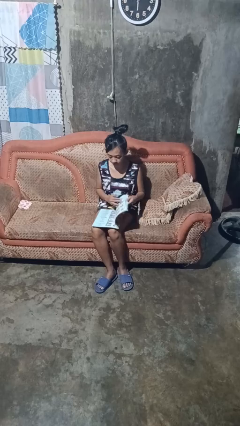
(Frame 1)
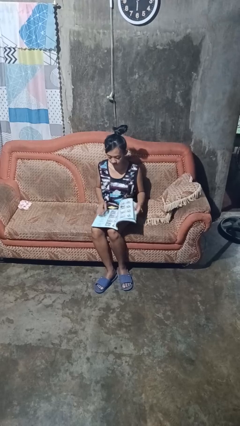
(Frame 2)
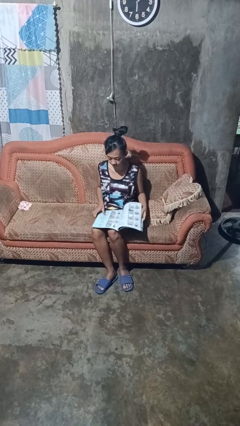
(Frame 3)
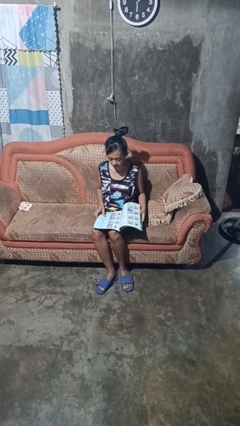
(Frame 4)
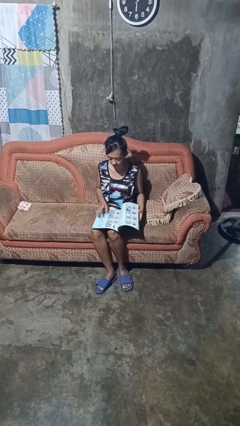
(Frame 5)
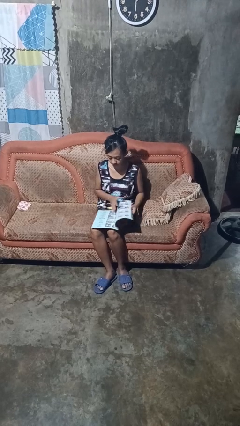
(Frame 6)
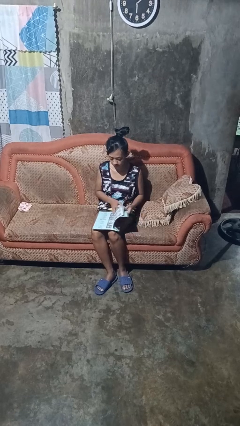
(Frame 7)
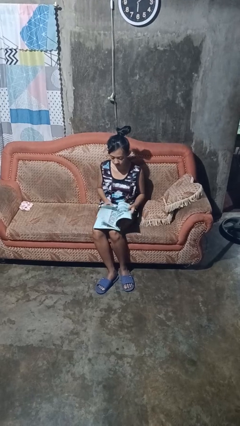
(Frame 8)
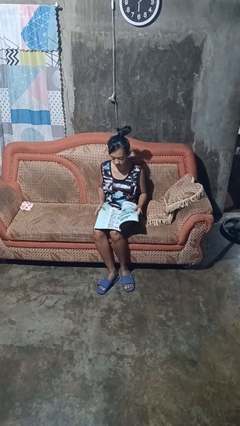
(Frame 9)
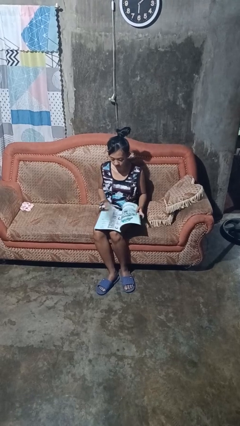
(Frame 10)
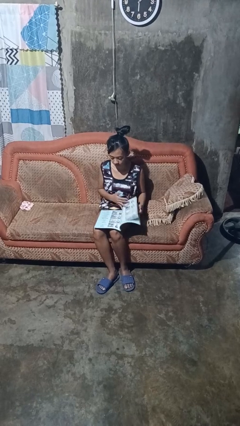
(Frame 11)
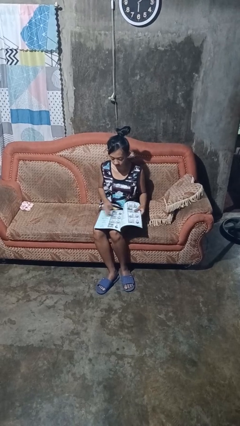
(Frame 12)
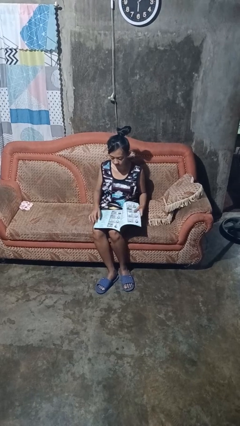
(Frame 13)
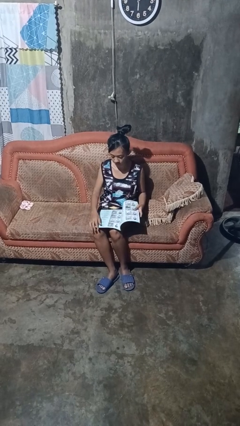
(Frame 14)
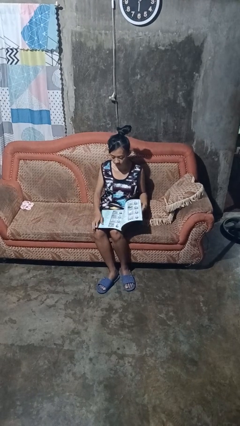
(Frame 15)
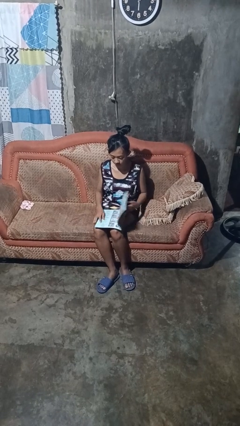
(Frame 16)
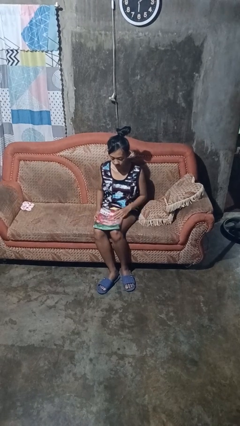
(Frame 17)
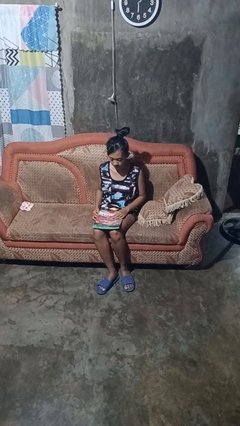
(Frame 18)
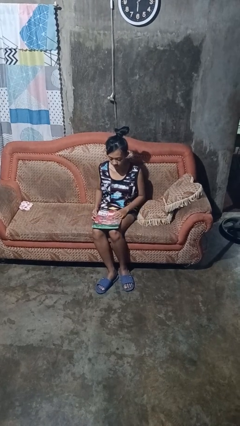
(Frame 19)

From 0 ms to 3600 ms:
person reads magazine

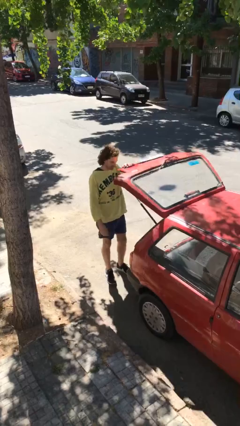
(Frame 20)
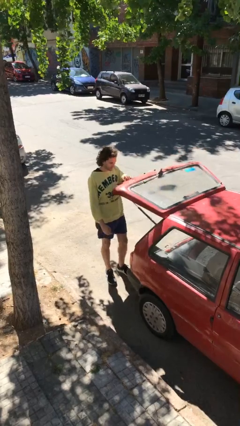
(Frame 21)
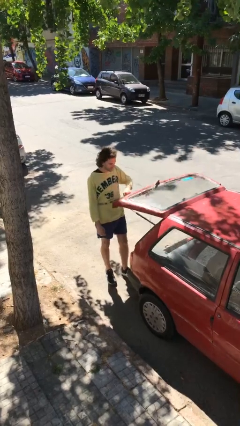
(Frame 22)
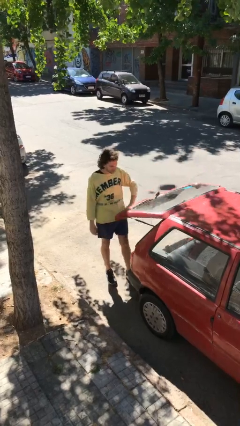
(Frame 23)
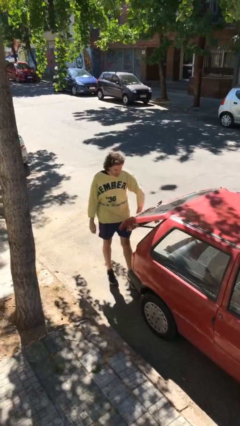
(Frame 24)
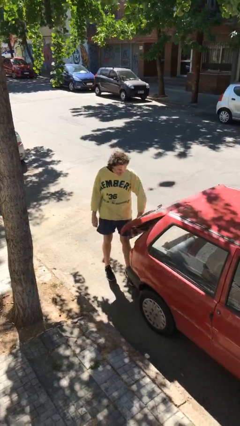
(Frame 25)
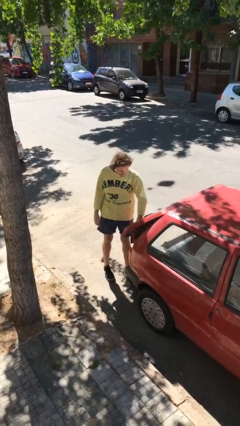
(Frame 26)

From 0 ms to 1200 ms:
person closes car trunk

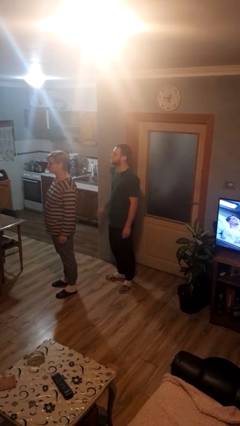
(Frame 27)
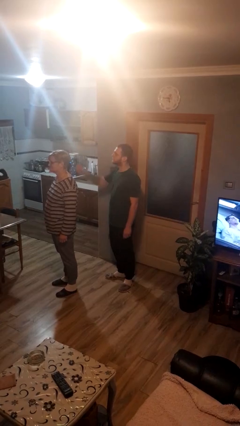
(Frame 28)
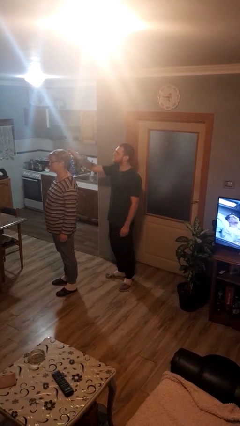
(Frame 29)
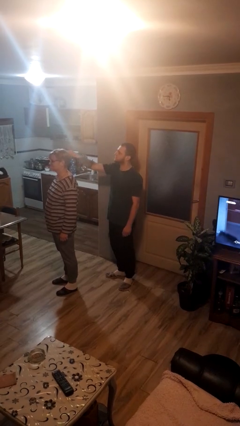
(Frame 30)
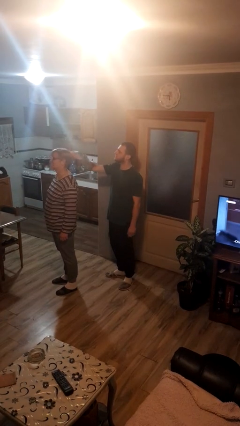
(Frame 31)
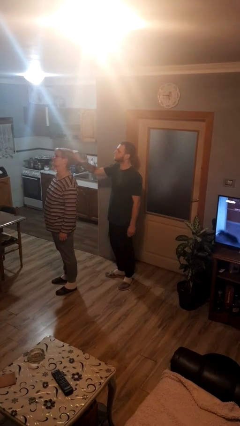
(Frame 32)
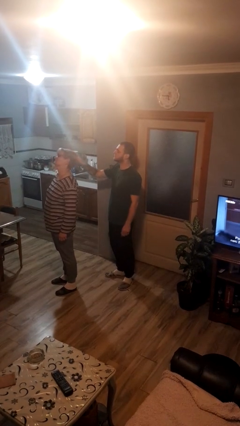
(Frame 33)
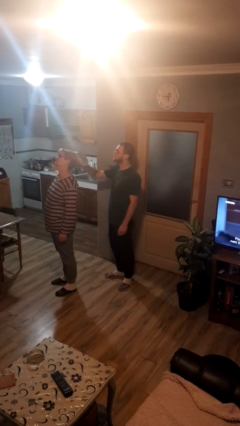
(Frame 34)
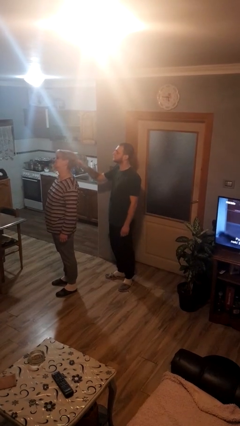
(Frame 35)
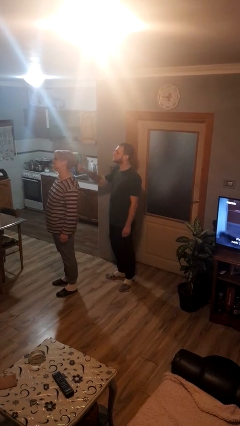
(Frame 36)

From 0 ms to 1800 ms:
person grabs person by hair

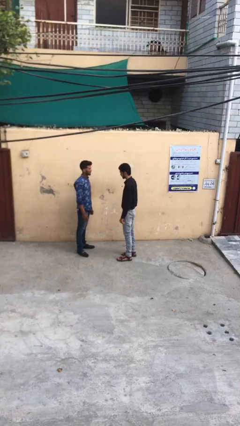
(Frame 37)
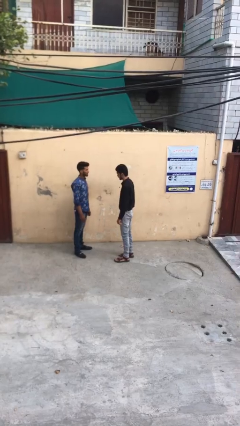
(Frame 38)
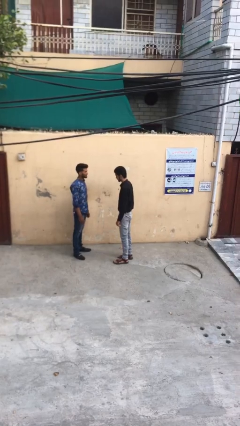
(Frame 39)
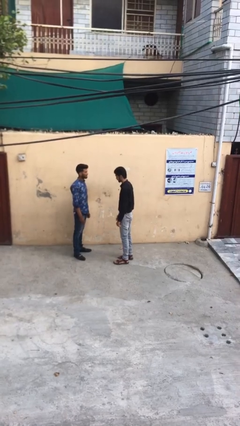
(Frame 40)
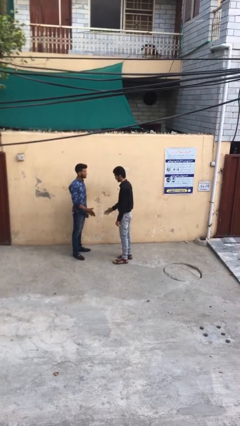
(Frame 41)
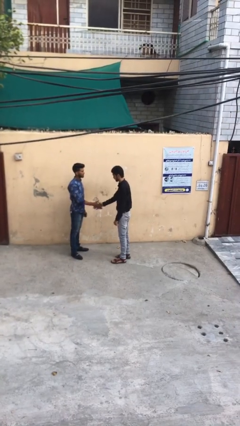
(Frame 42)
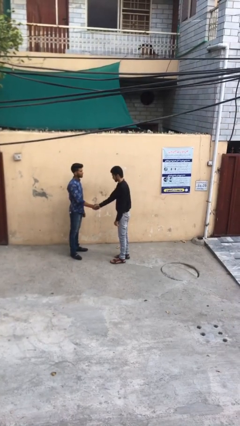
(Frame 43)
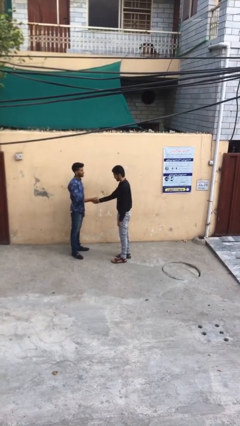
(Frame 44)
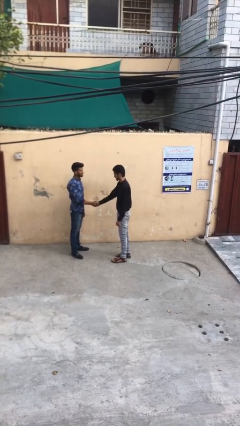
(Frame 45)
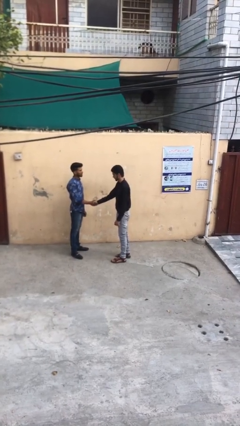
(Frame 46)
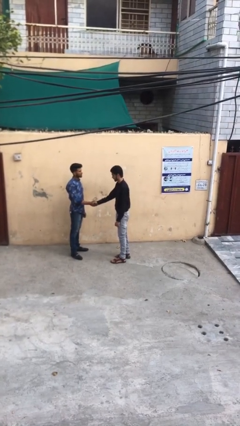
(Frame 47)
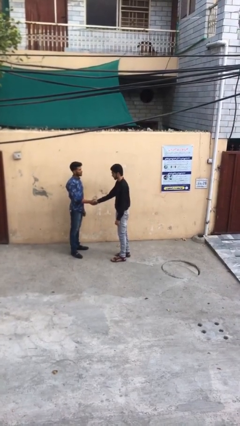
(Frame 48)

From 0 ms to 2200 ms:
person shakes hand

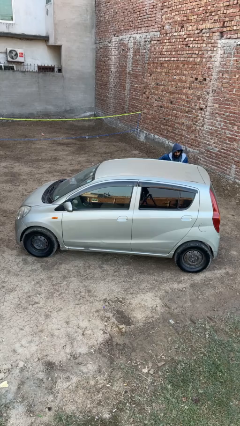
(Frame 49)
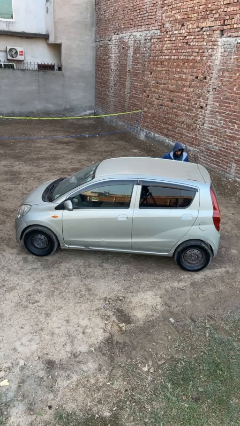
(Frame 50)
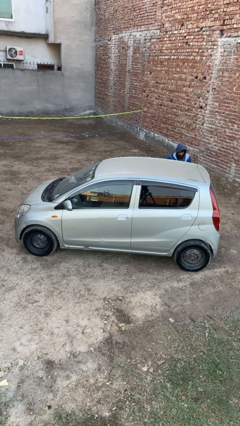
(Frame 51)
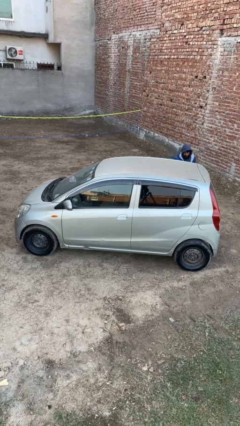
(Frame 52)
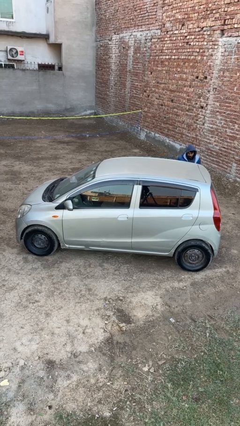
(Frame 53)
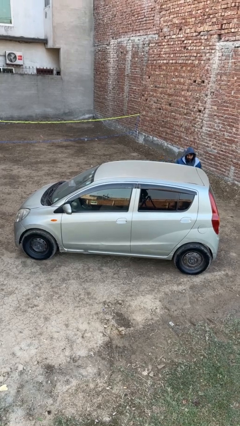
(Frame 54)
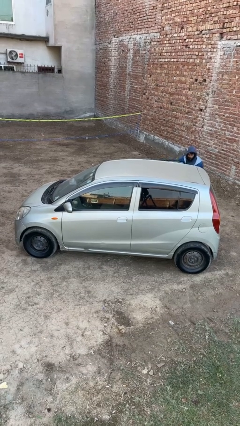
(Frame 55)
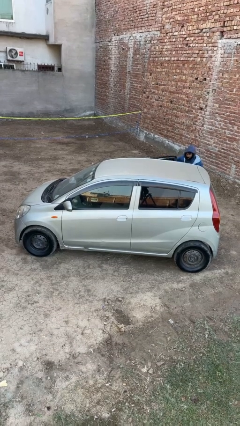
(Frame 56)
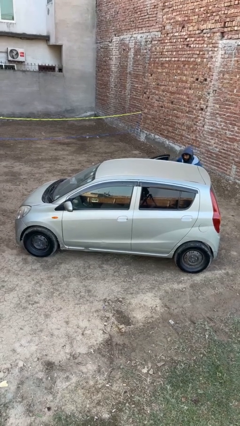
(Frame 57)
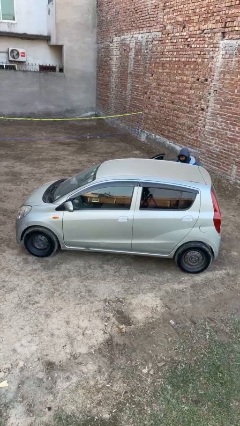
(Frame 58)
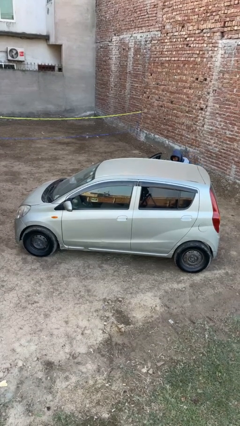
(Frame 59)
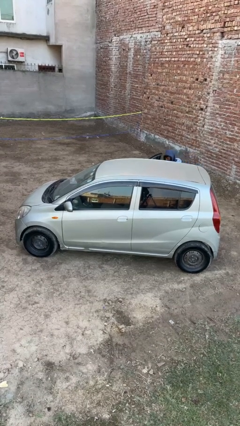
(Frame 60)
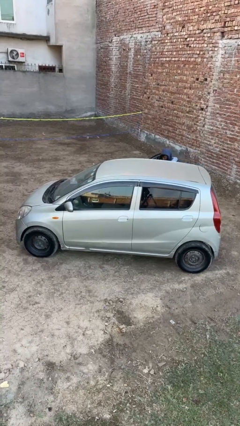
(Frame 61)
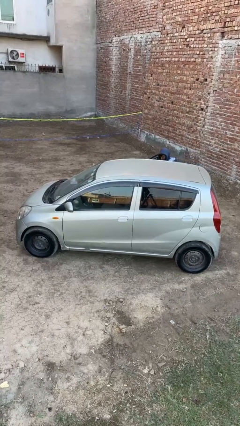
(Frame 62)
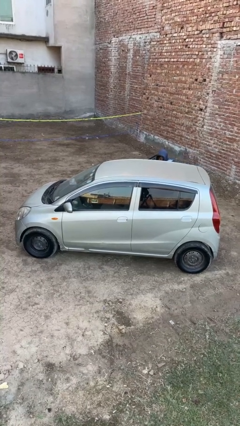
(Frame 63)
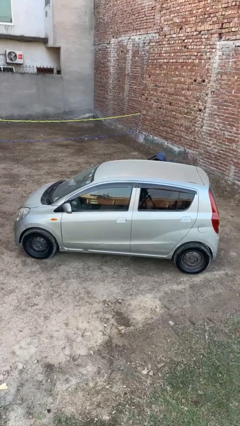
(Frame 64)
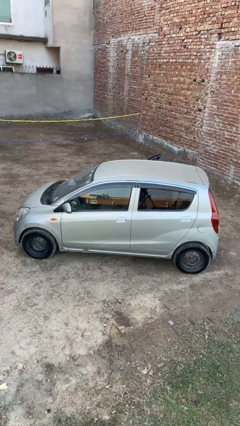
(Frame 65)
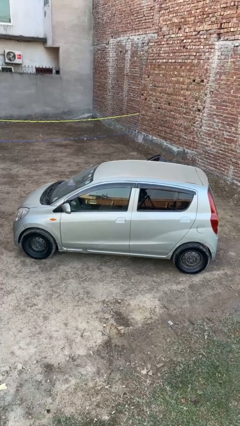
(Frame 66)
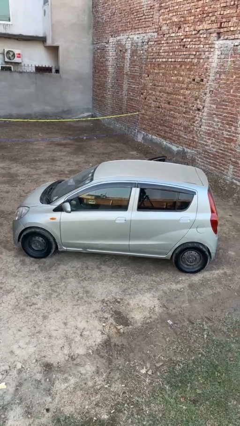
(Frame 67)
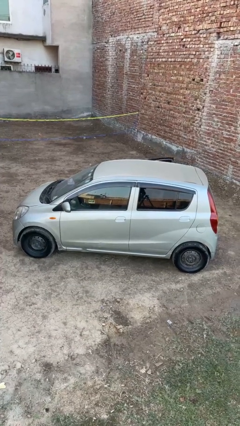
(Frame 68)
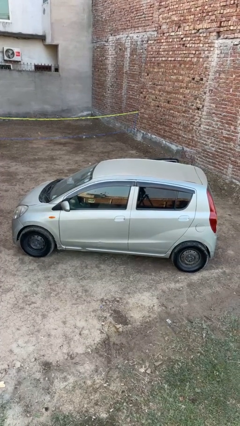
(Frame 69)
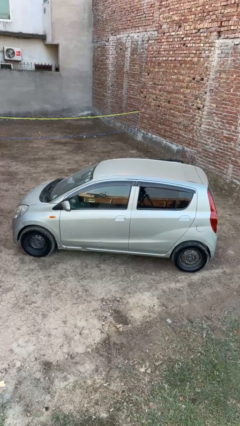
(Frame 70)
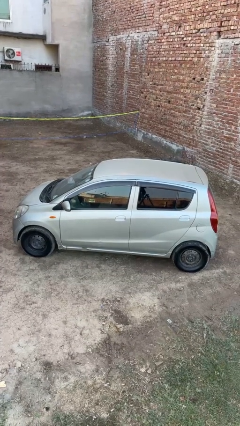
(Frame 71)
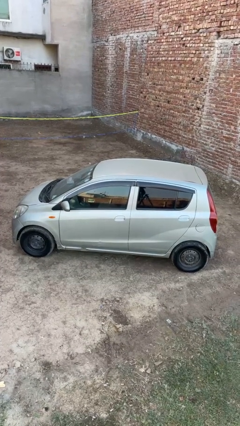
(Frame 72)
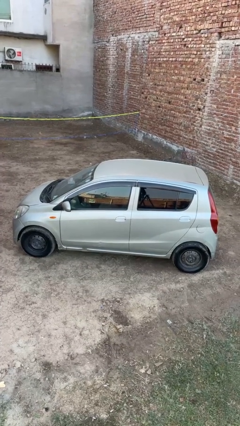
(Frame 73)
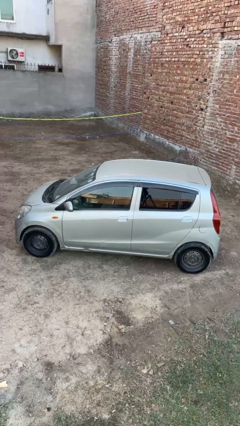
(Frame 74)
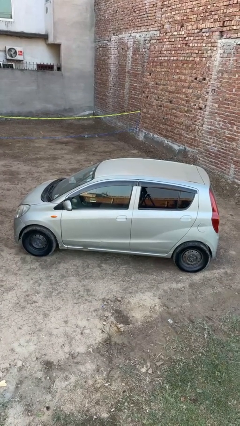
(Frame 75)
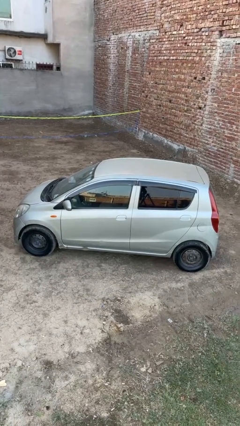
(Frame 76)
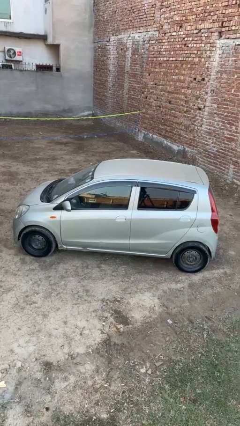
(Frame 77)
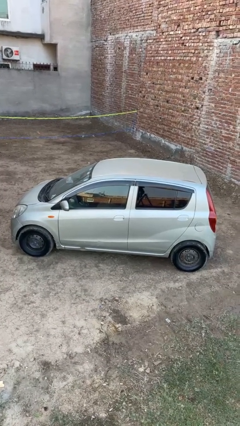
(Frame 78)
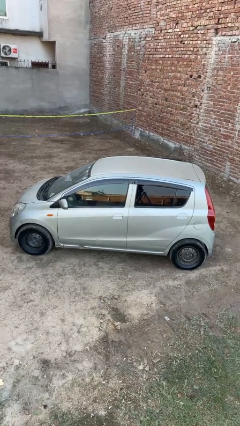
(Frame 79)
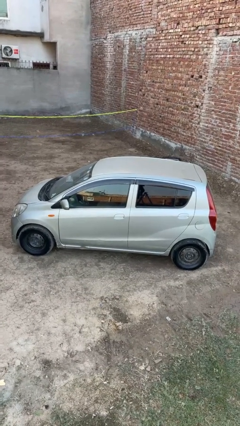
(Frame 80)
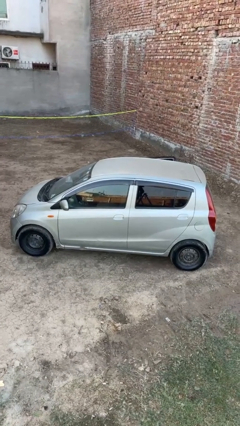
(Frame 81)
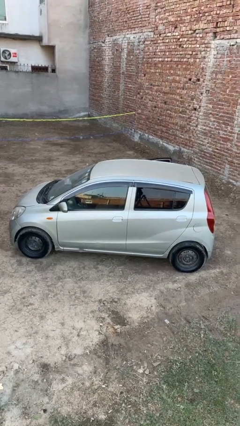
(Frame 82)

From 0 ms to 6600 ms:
car picks up person

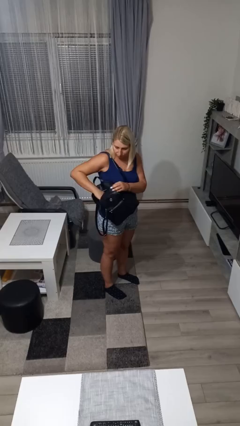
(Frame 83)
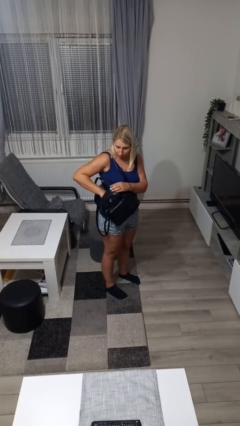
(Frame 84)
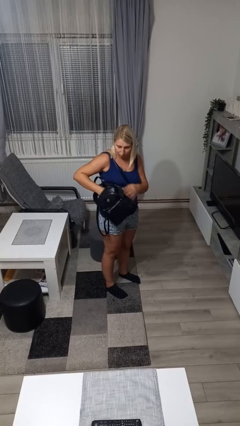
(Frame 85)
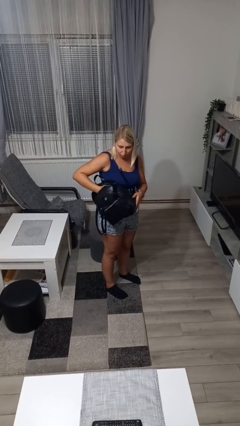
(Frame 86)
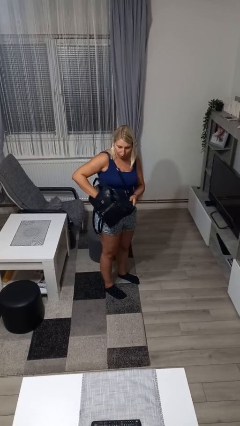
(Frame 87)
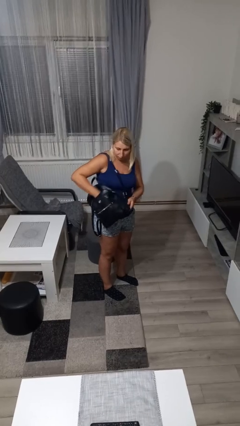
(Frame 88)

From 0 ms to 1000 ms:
person puts object into backpack

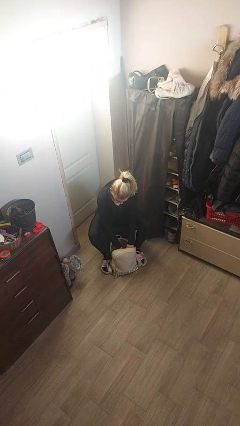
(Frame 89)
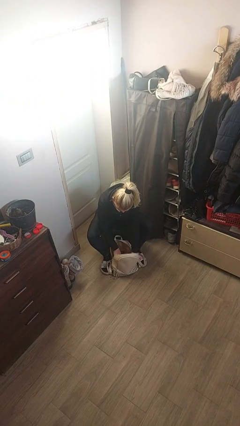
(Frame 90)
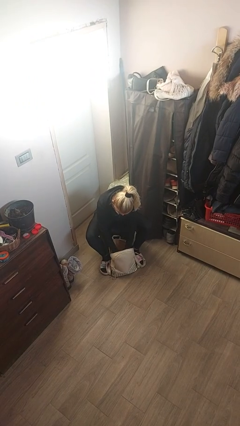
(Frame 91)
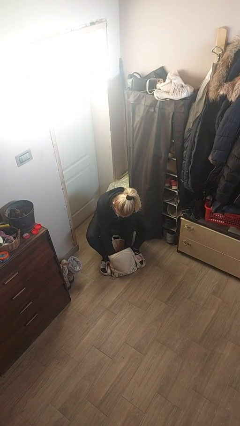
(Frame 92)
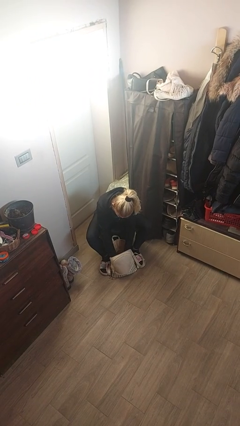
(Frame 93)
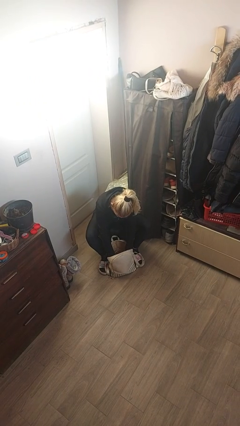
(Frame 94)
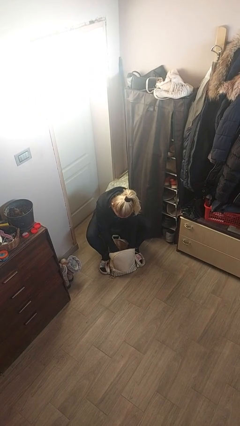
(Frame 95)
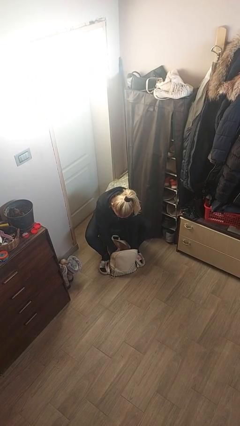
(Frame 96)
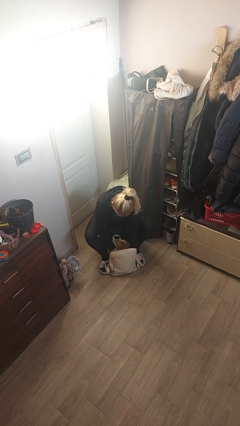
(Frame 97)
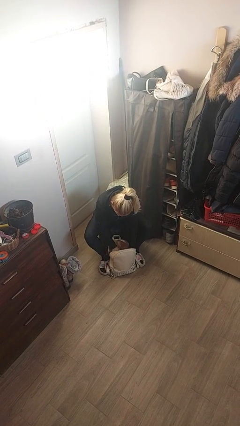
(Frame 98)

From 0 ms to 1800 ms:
person searches in backpack
